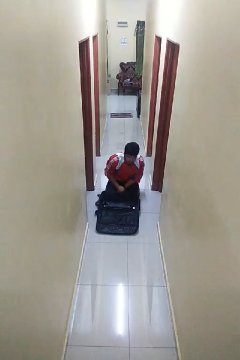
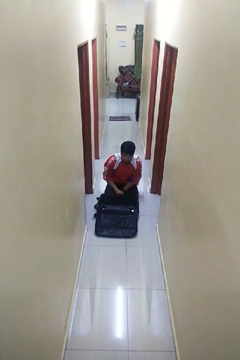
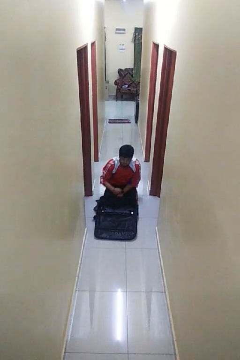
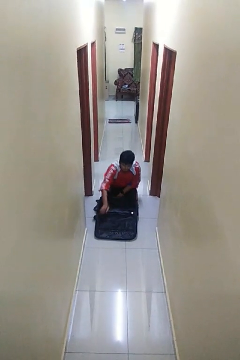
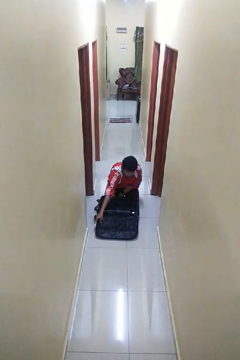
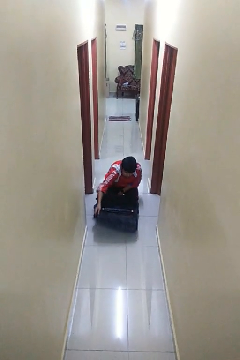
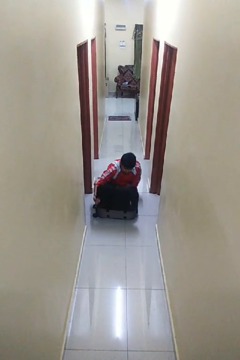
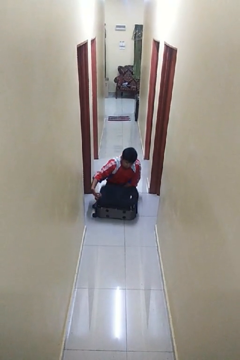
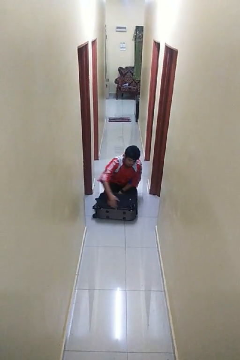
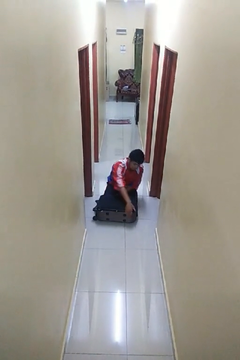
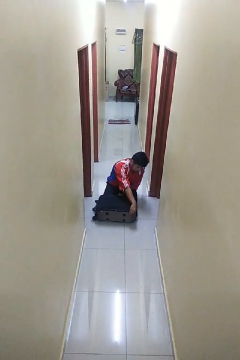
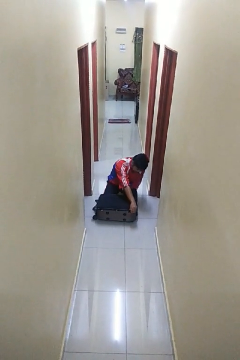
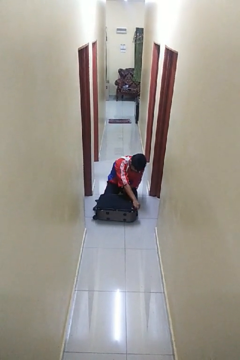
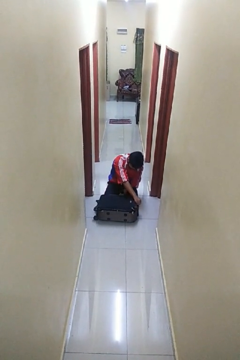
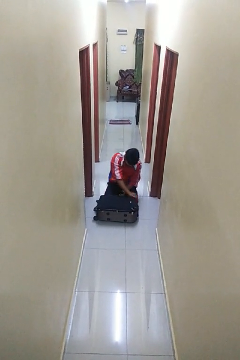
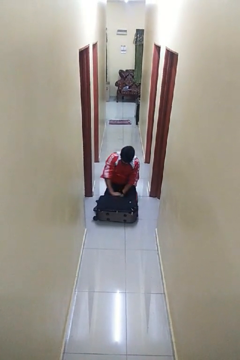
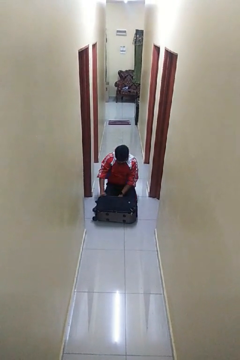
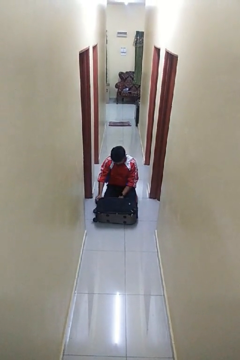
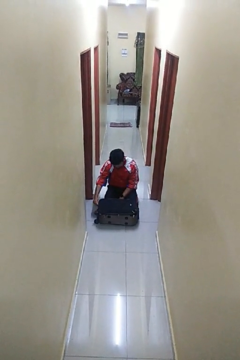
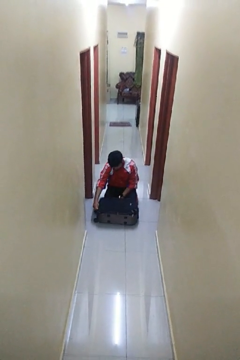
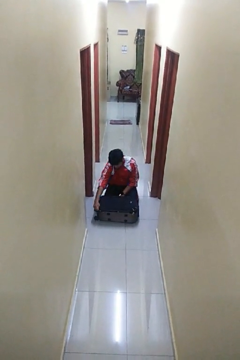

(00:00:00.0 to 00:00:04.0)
person closes suitcase

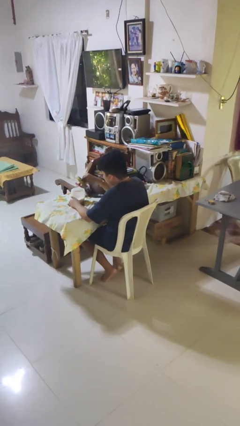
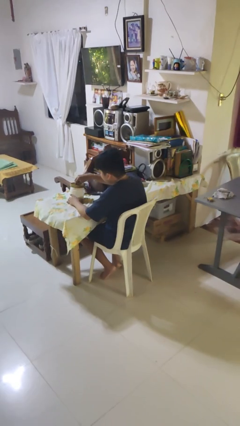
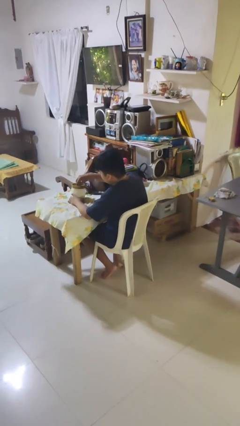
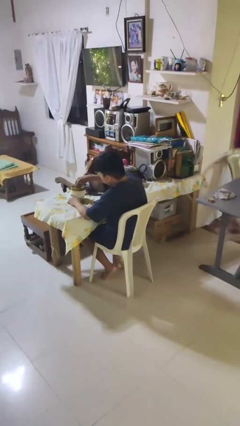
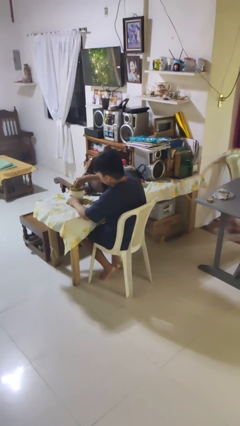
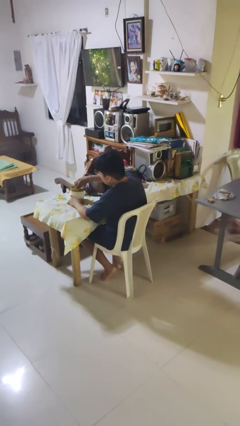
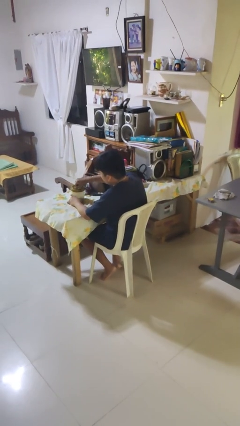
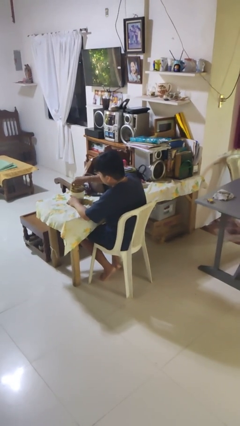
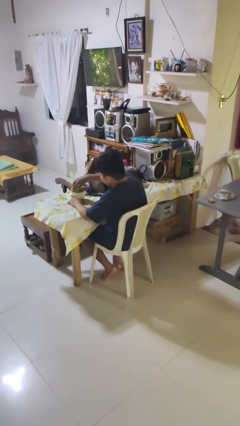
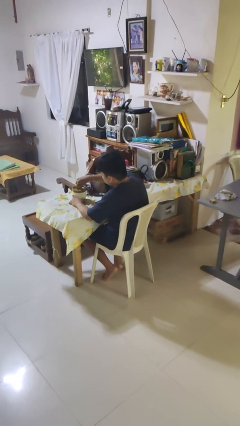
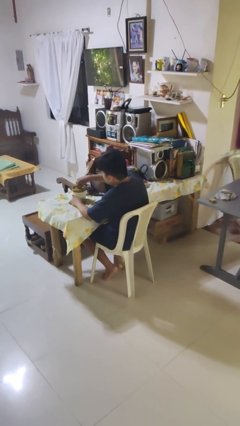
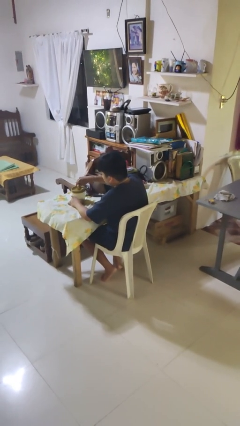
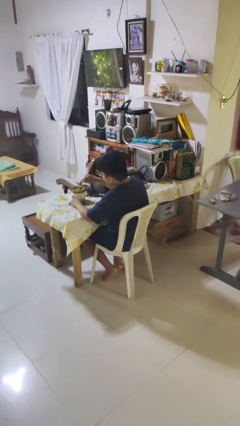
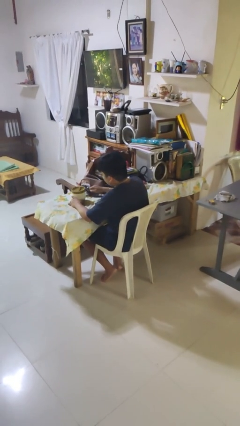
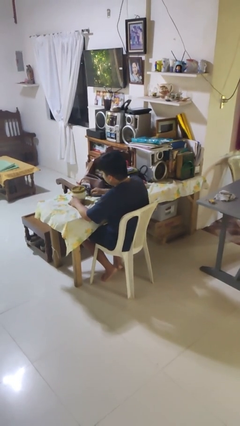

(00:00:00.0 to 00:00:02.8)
person closes jar

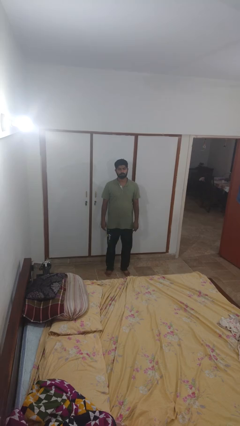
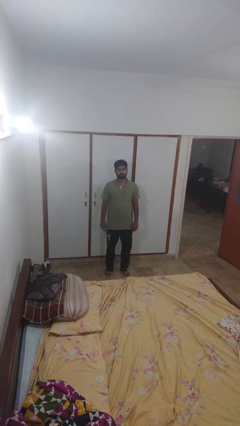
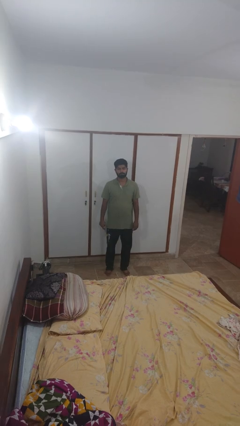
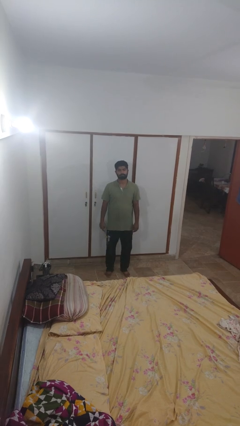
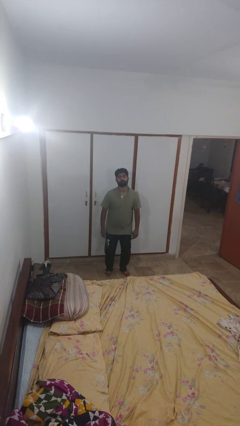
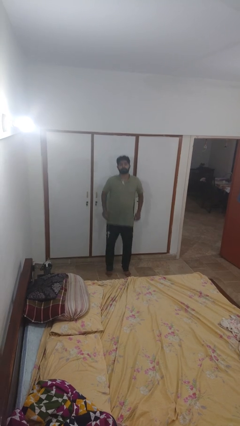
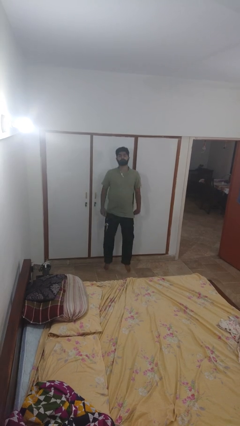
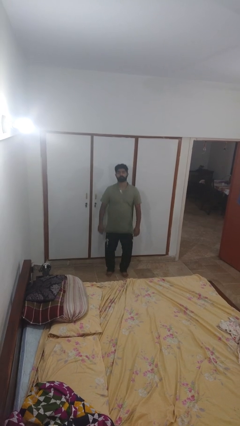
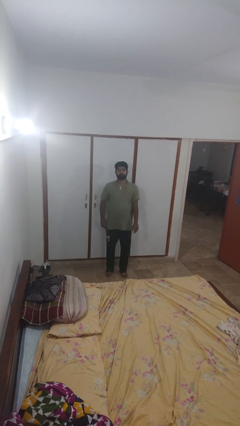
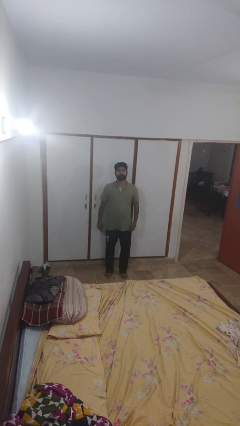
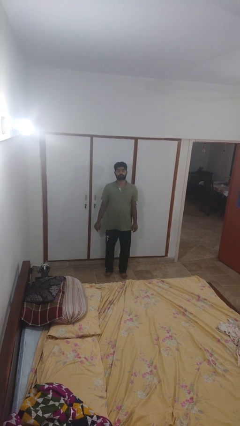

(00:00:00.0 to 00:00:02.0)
person jumps

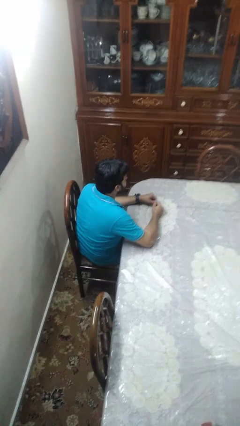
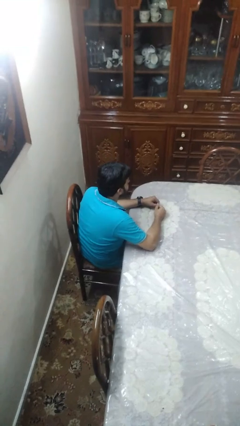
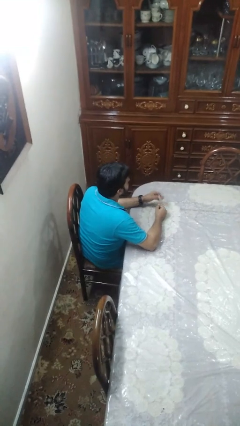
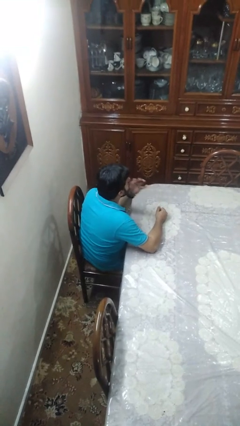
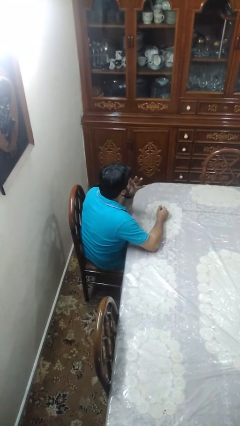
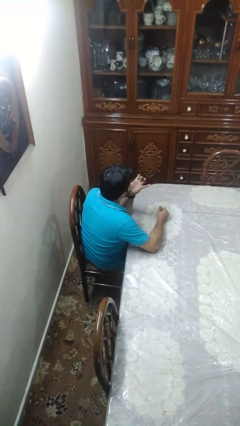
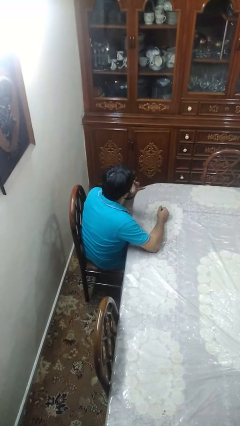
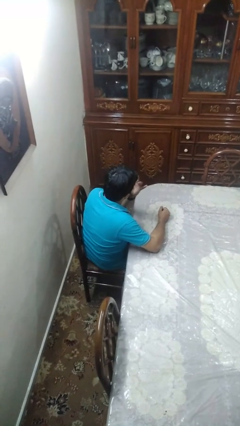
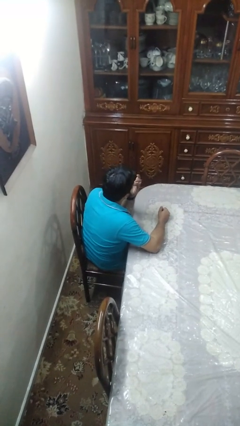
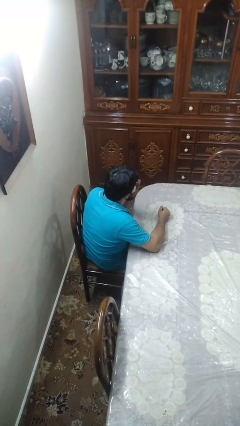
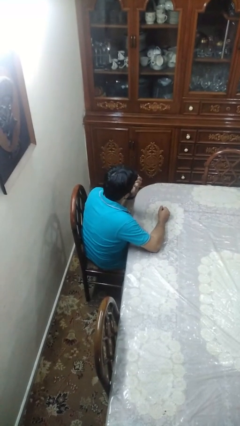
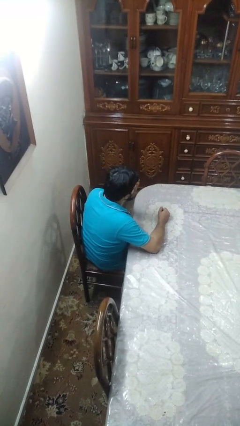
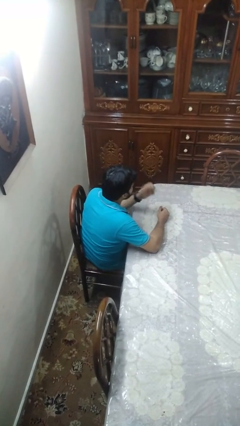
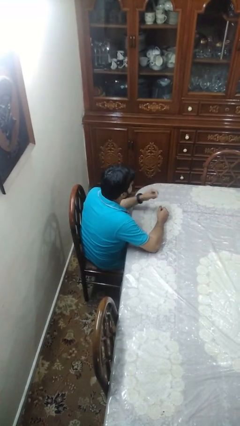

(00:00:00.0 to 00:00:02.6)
person licks fingers

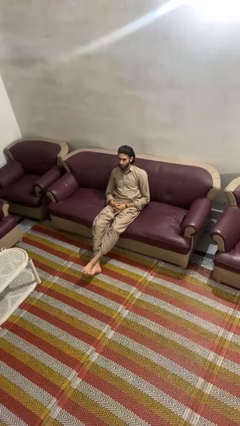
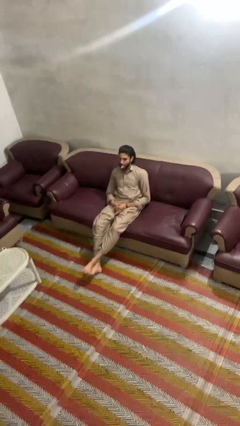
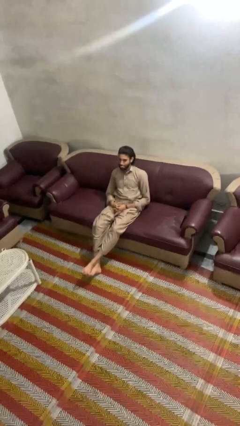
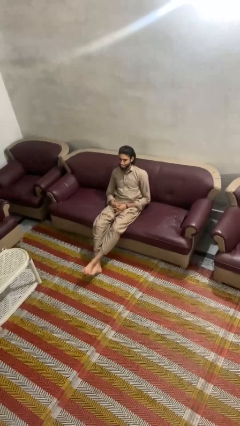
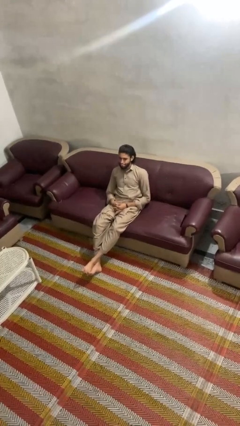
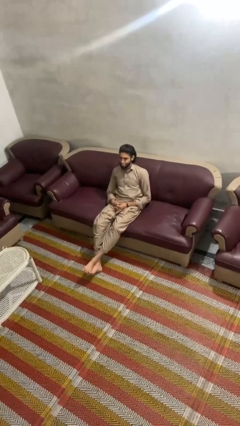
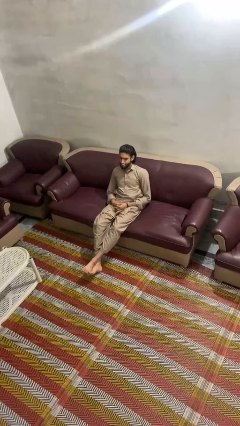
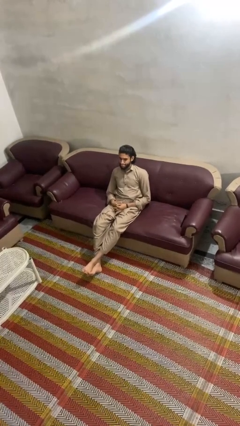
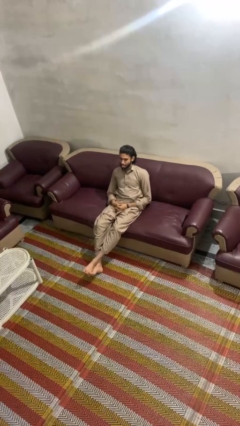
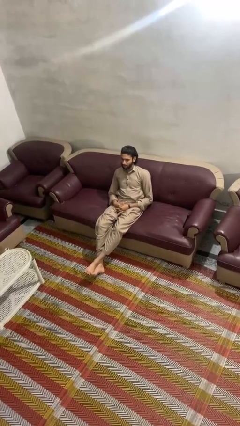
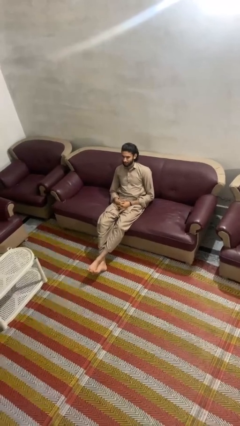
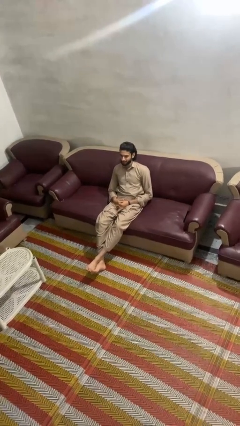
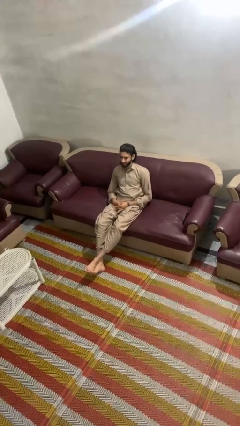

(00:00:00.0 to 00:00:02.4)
person sticks out tongue

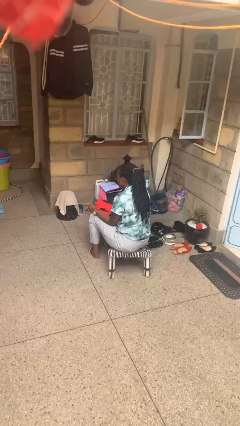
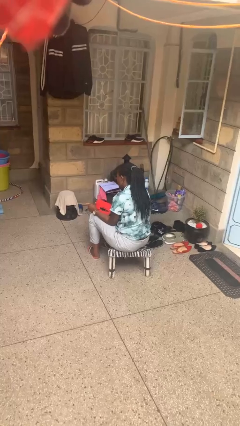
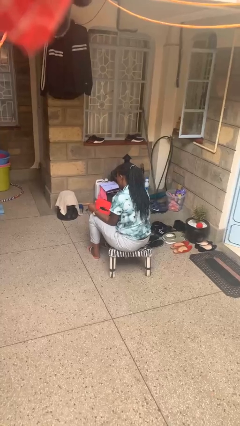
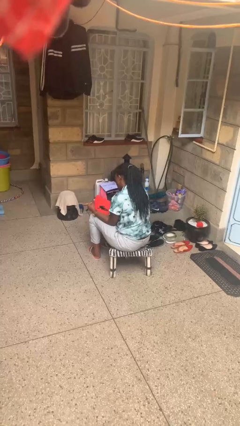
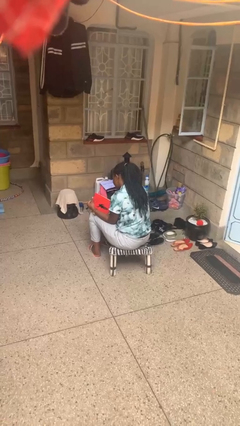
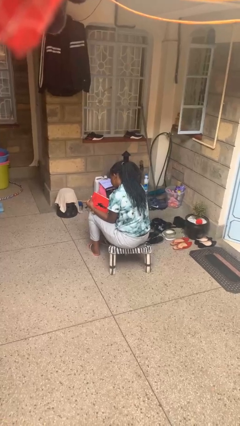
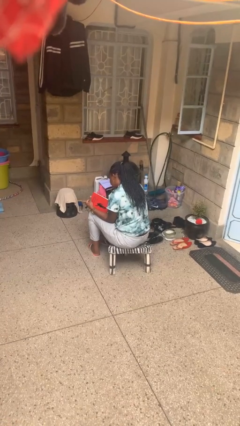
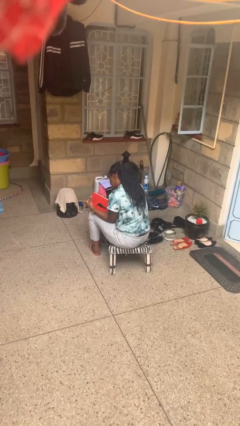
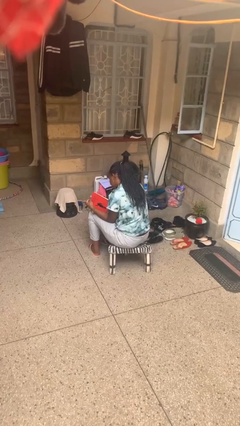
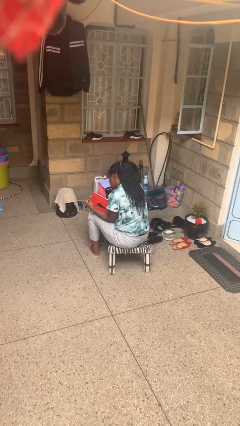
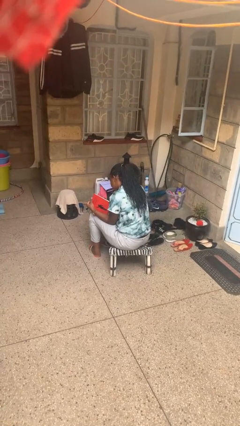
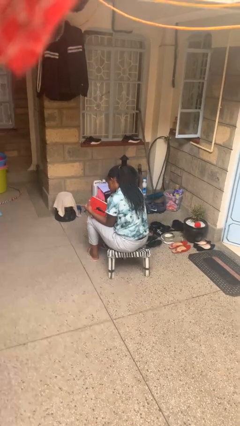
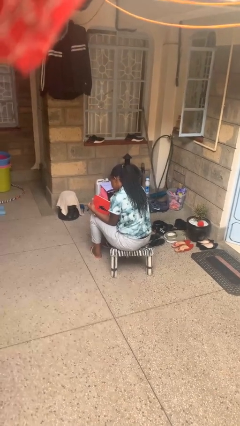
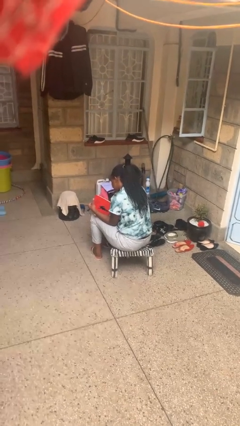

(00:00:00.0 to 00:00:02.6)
person reads book

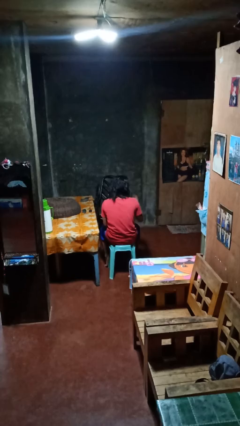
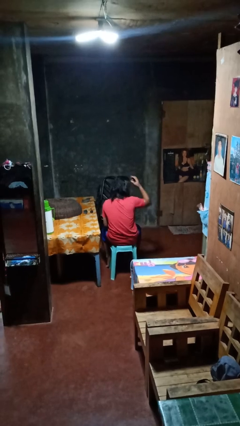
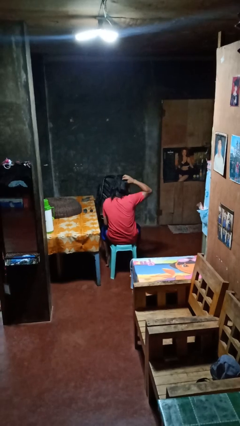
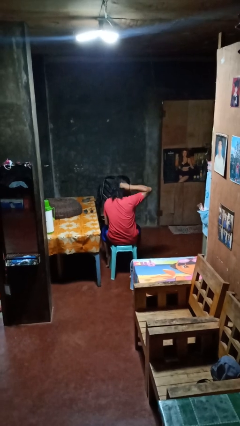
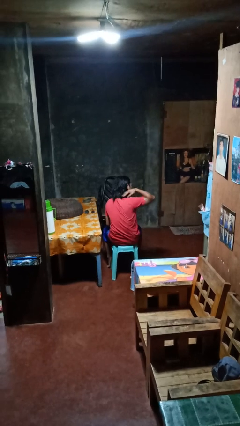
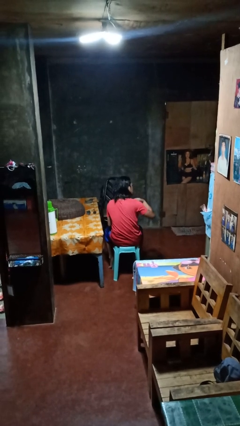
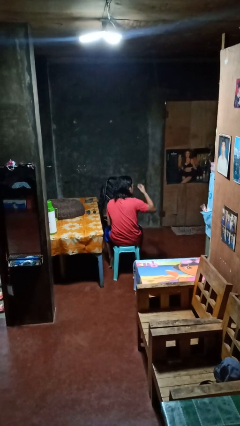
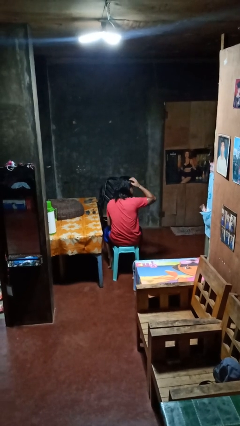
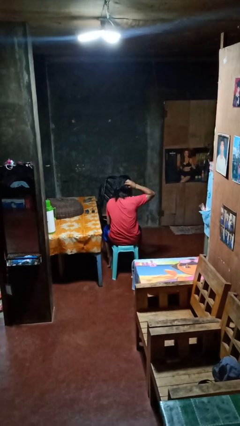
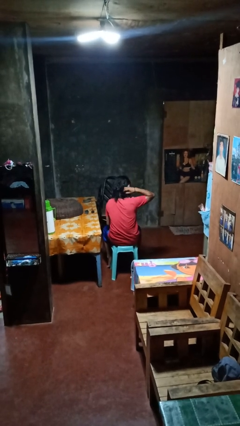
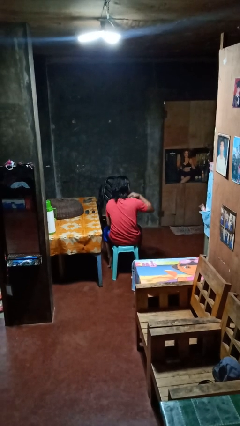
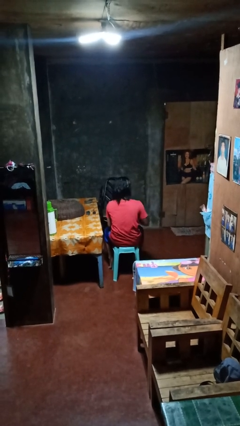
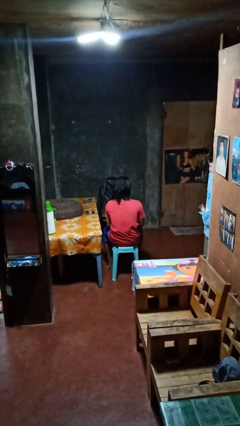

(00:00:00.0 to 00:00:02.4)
person strokes hair
